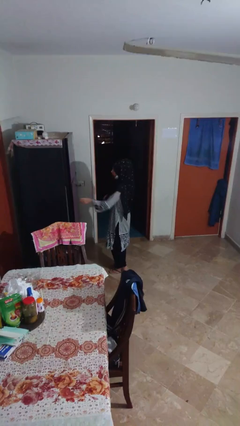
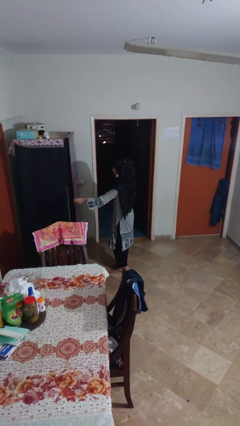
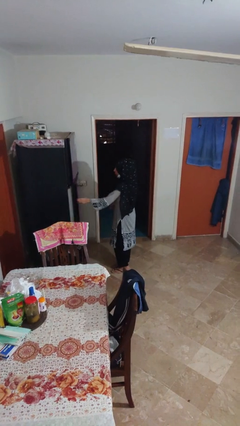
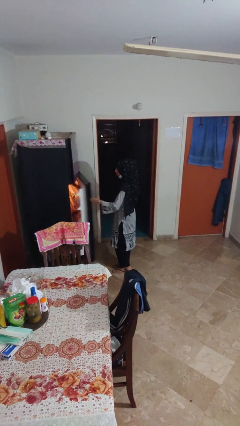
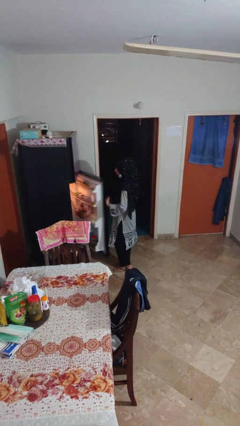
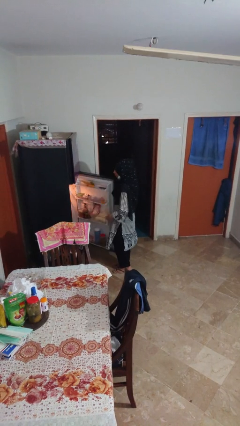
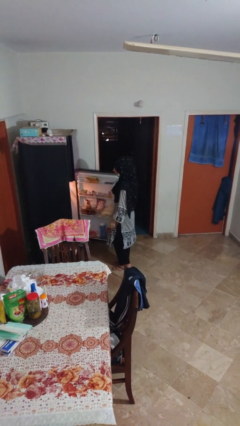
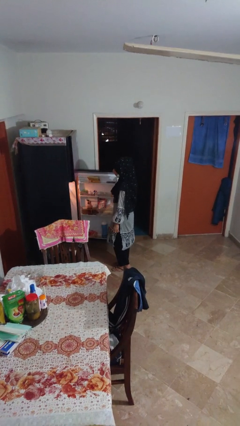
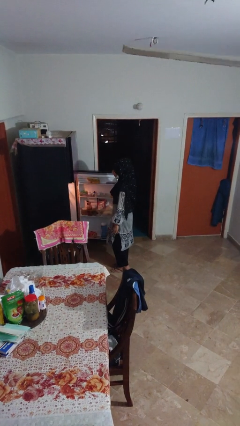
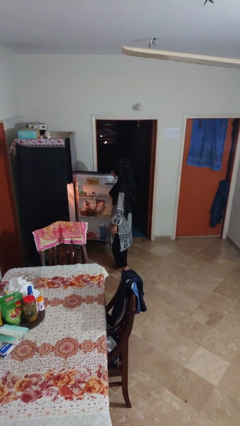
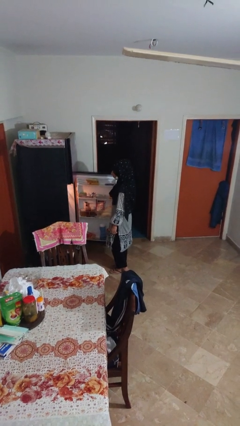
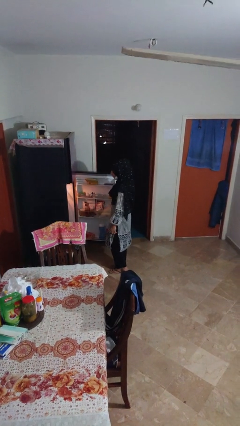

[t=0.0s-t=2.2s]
person opens refrigerator

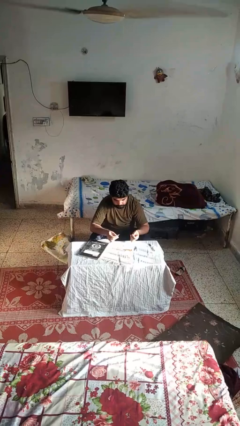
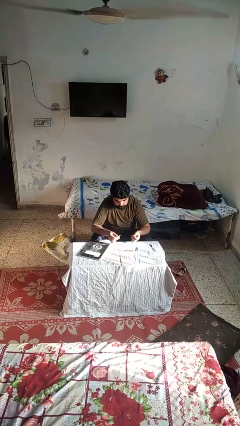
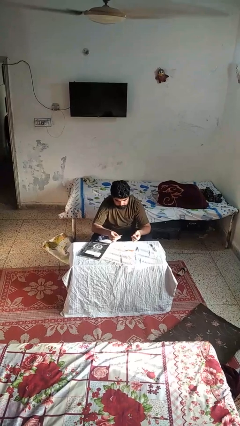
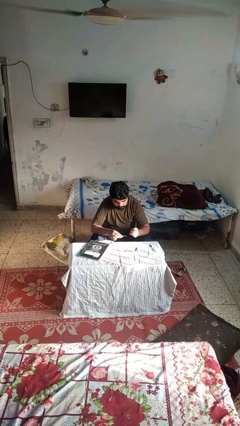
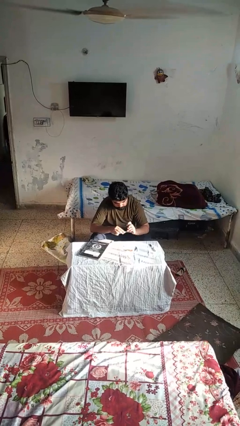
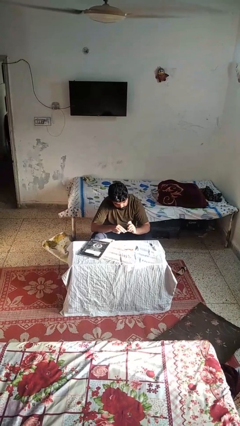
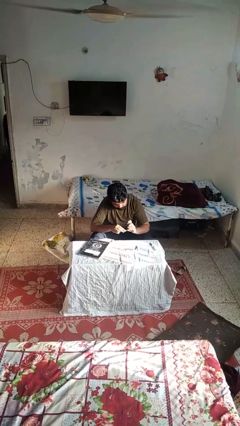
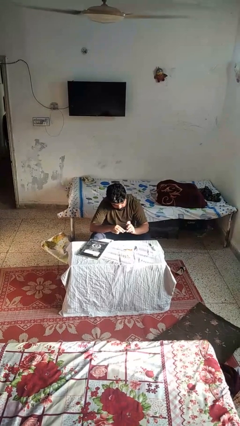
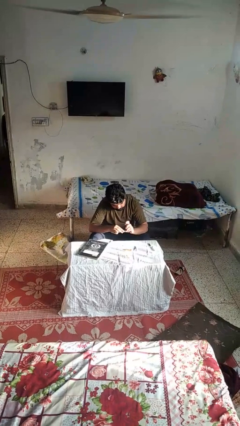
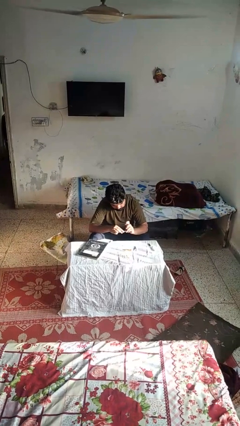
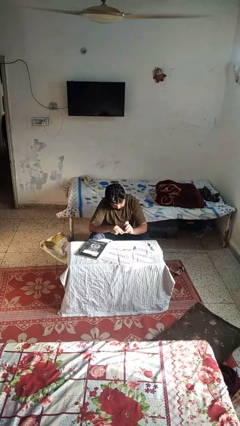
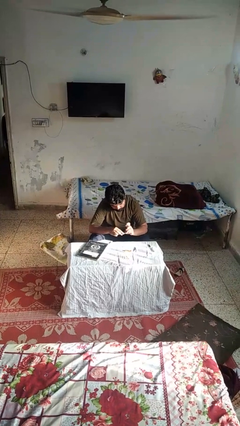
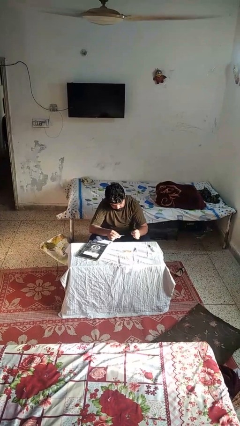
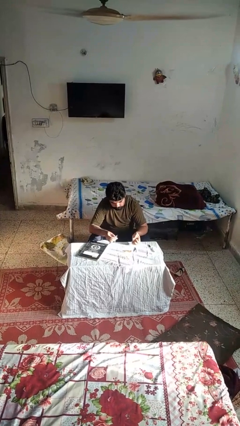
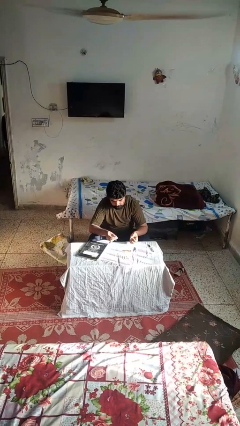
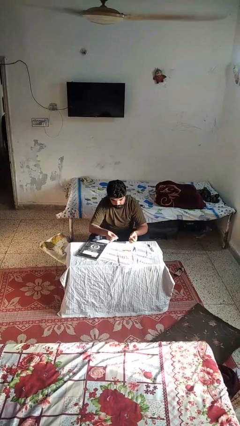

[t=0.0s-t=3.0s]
person files fingernails

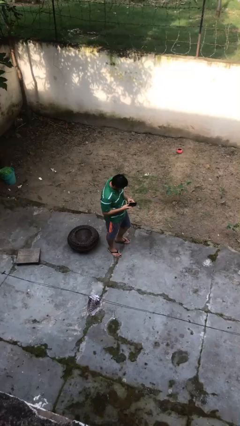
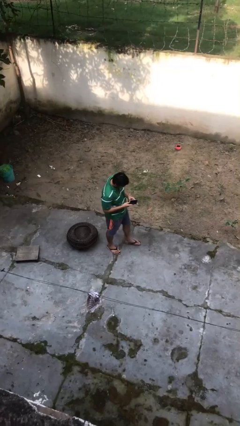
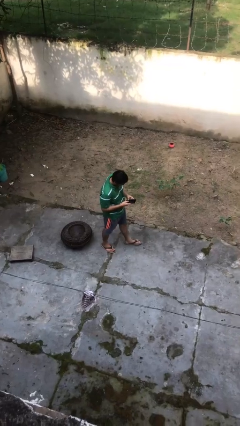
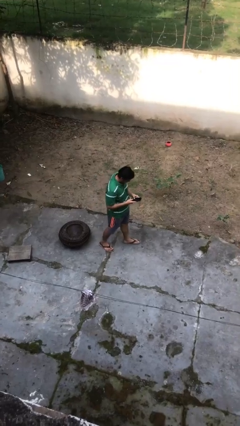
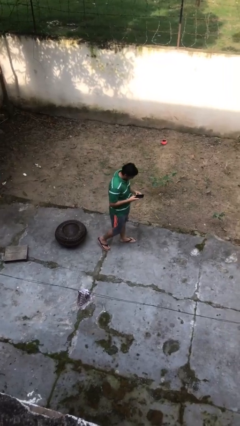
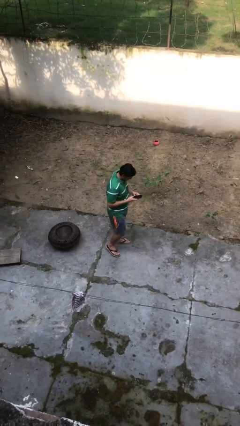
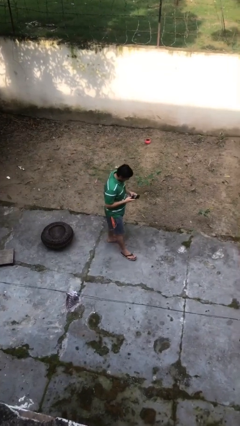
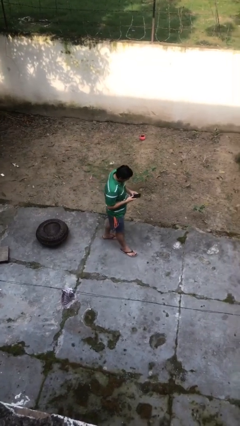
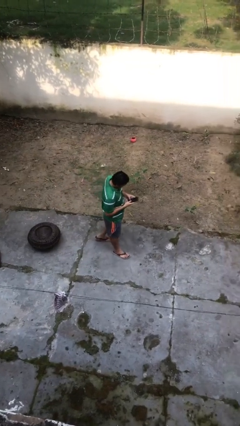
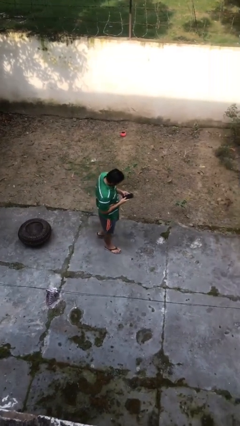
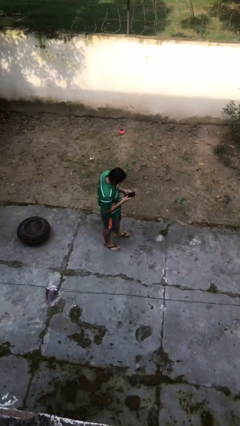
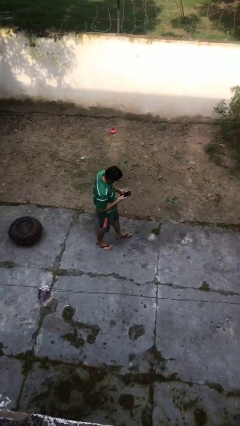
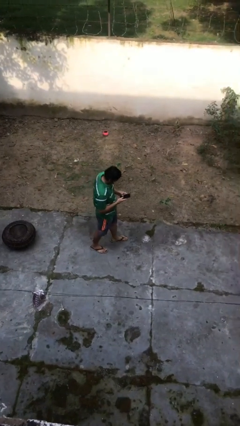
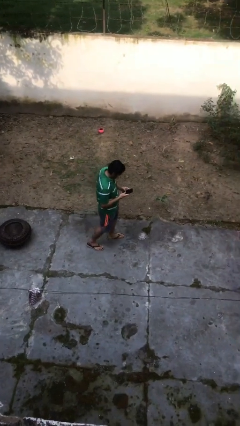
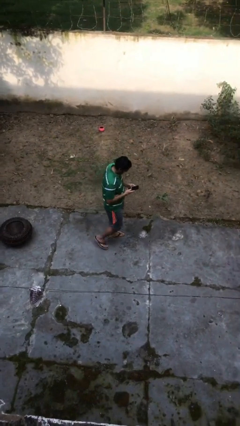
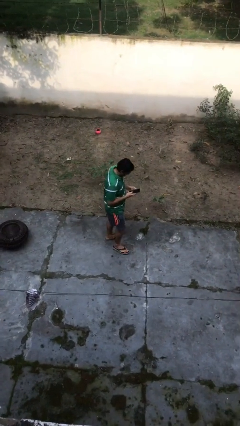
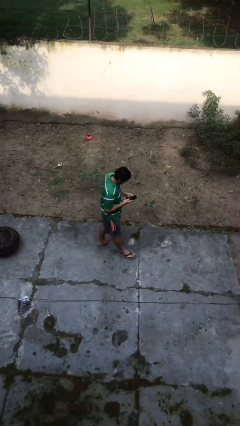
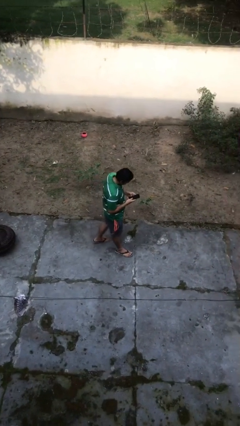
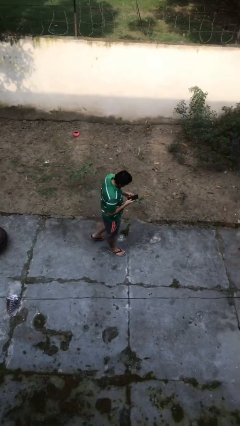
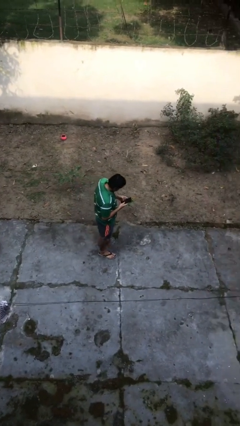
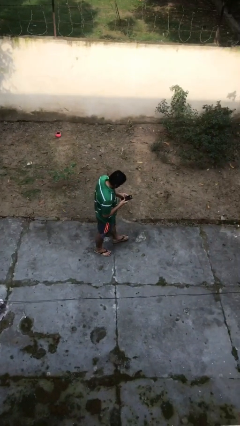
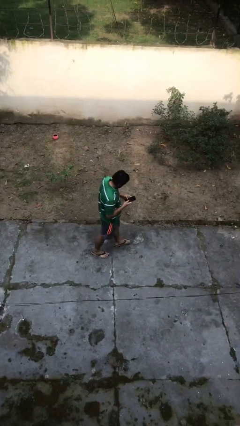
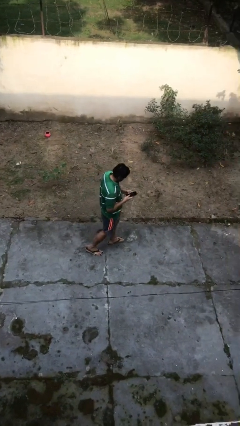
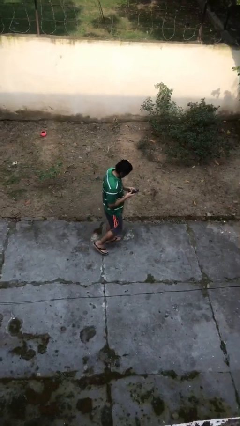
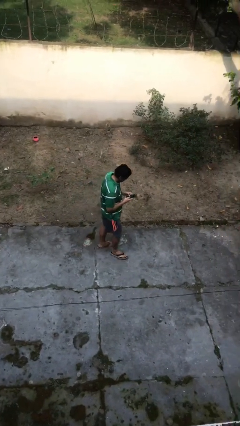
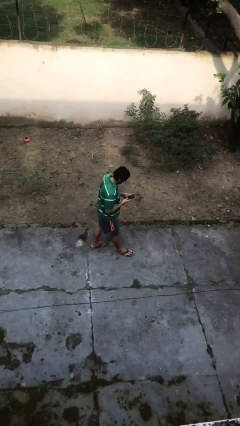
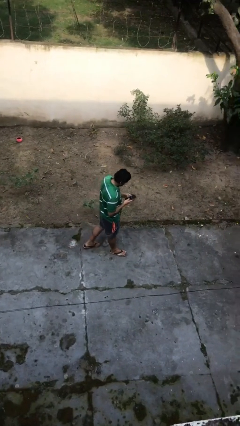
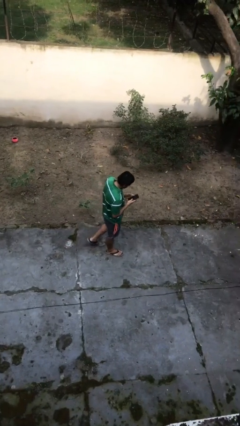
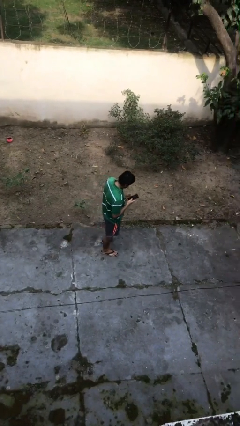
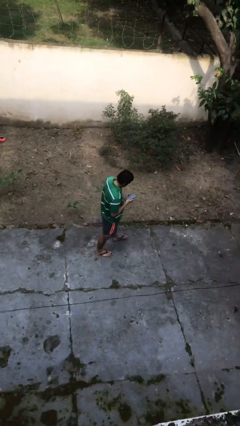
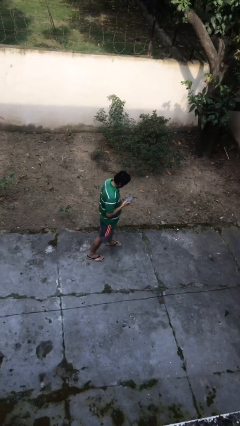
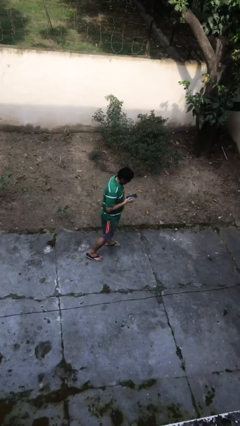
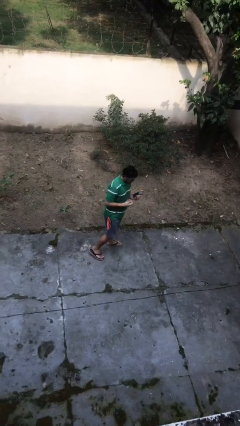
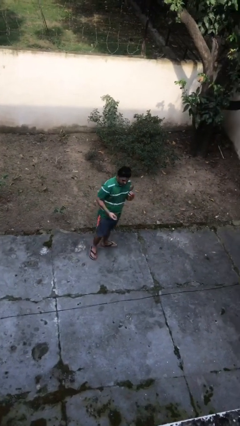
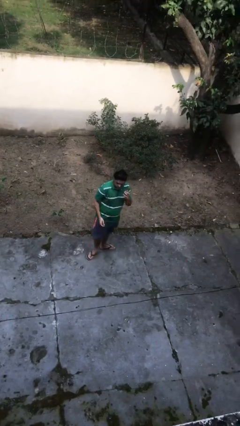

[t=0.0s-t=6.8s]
person texts on phone

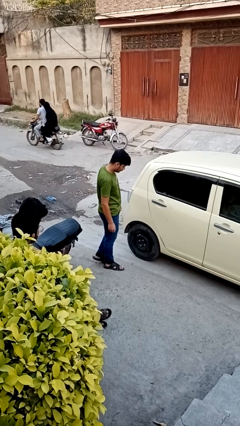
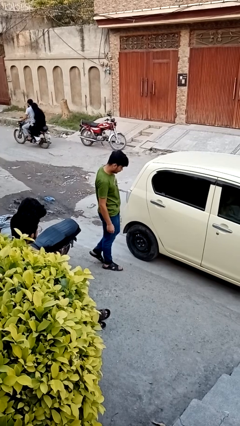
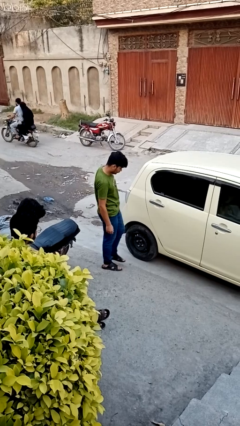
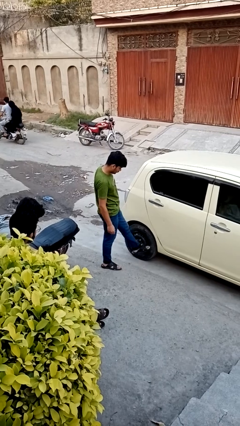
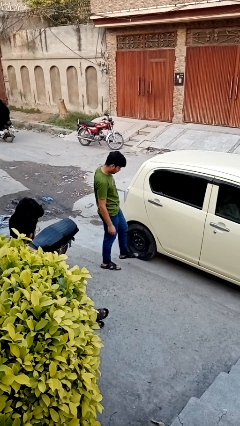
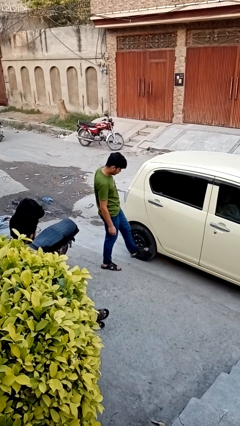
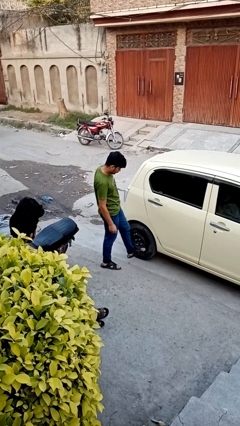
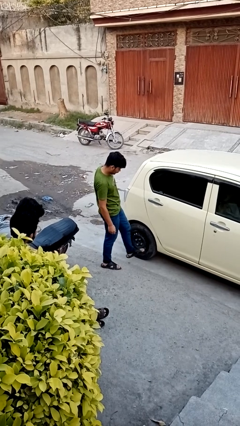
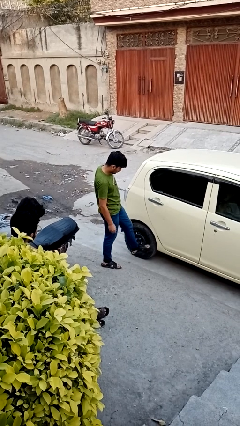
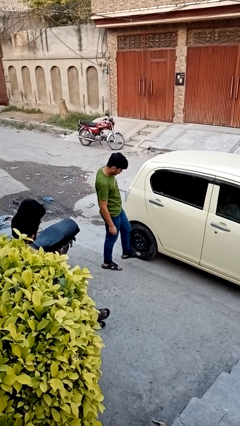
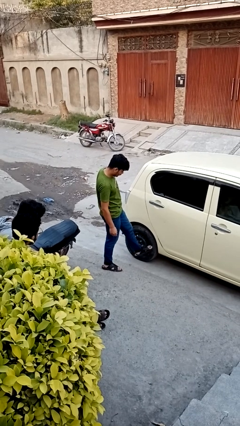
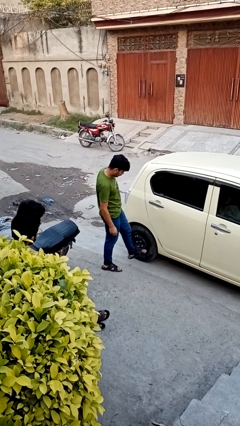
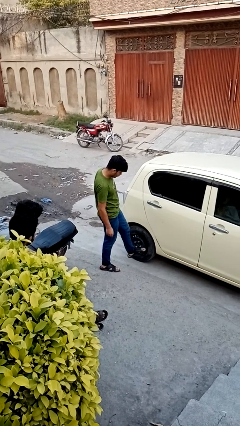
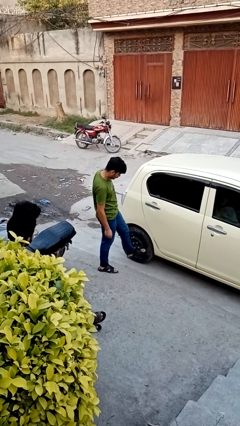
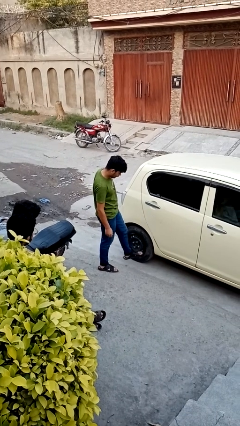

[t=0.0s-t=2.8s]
person kicks car tires

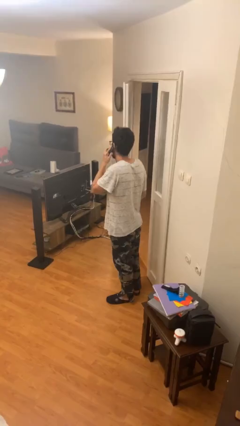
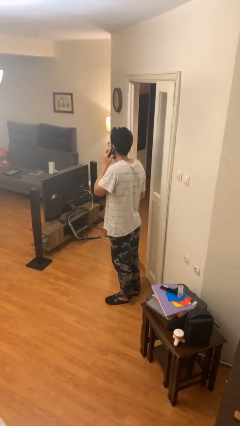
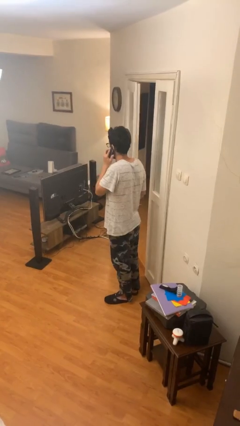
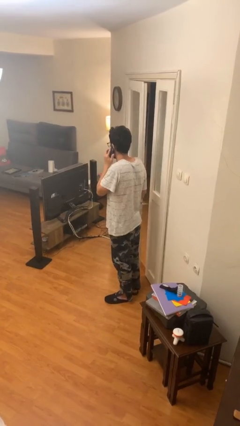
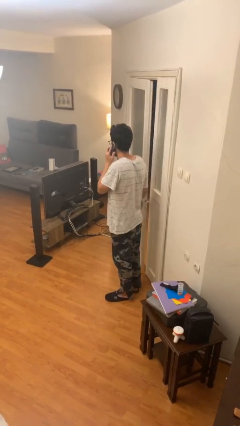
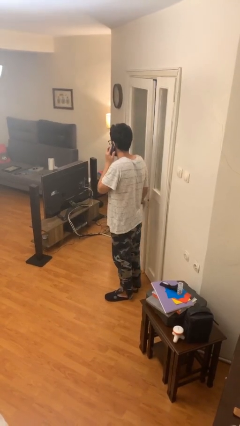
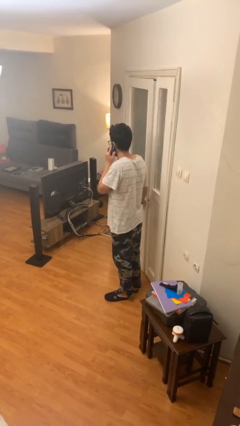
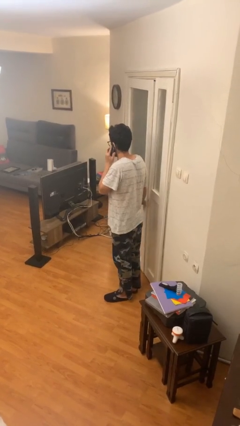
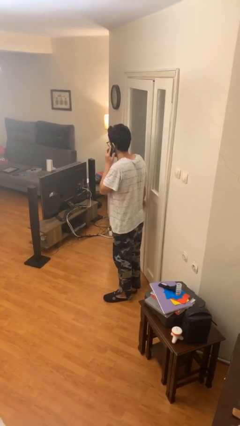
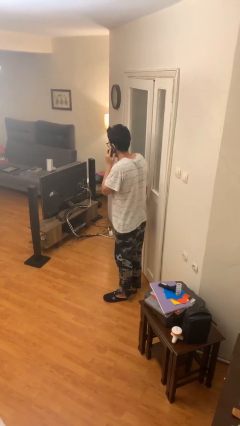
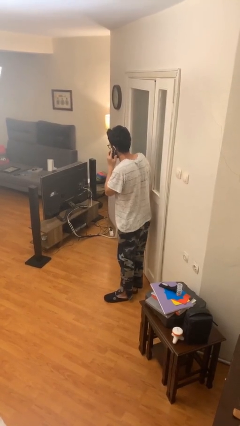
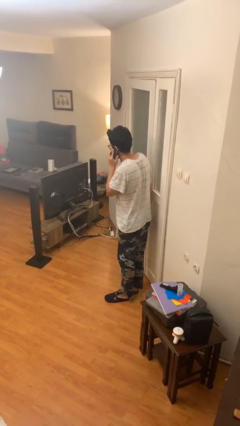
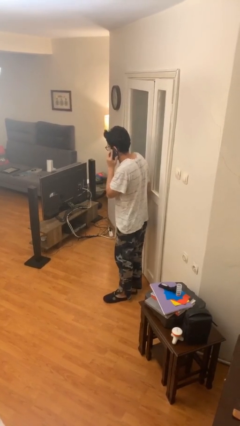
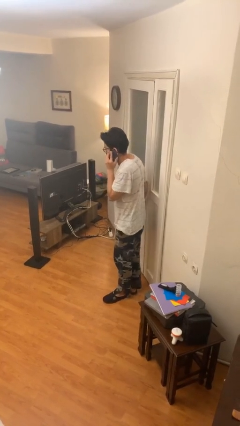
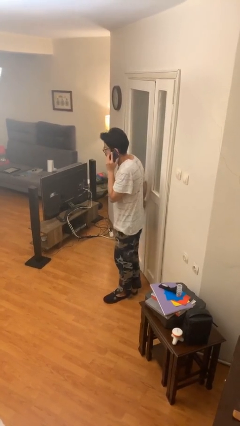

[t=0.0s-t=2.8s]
person closes facility door
